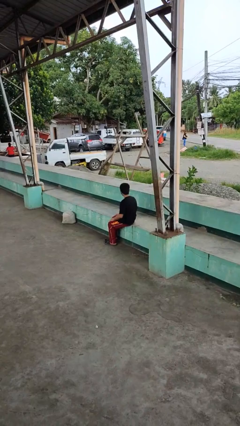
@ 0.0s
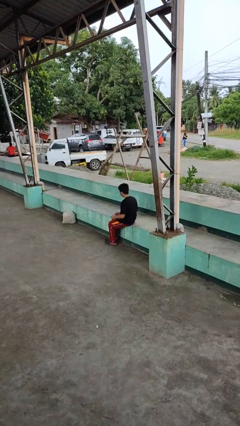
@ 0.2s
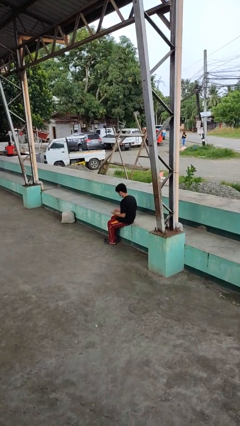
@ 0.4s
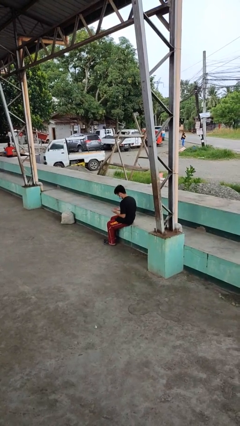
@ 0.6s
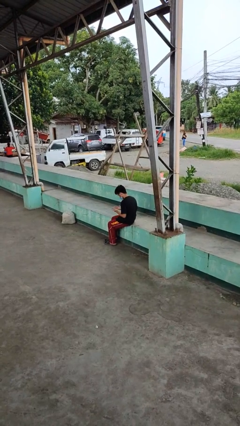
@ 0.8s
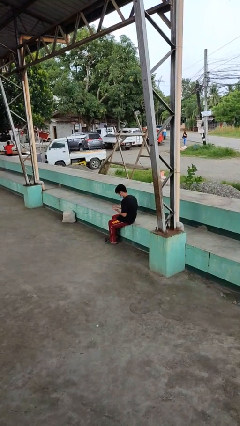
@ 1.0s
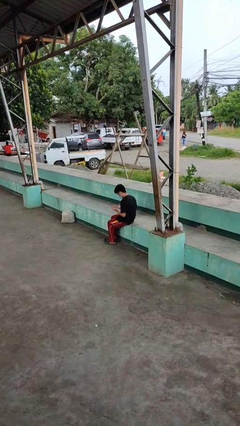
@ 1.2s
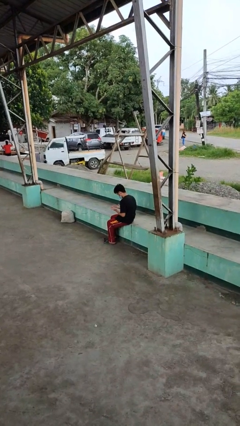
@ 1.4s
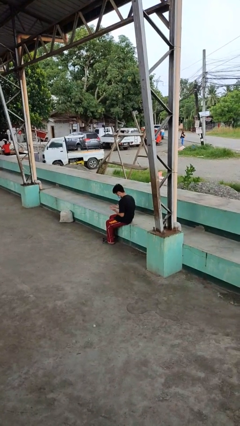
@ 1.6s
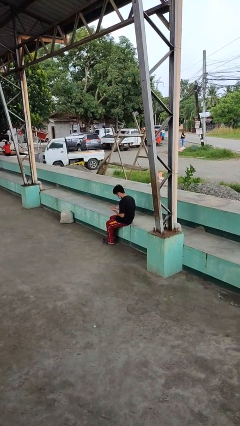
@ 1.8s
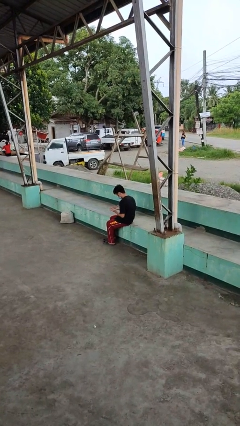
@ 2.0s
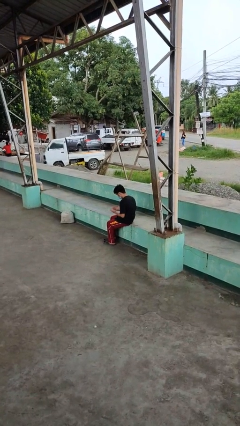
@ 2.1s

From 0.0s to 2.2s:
person looks at hands in lap

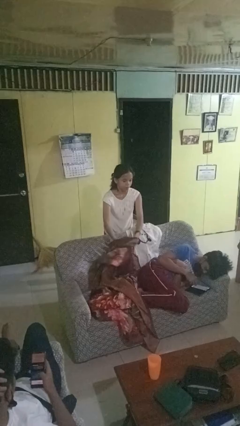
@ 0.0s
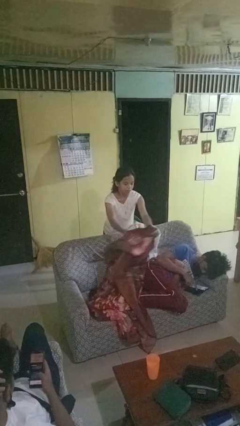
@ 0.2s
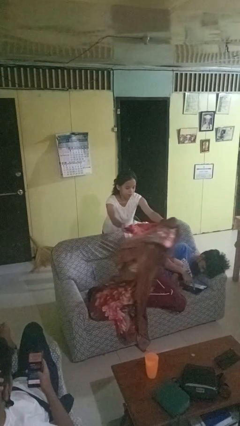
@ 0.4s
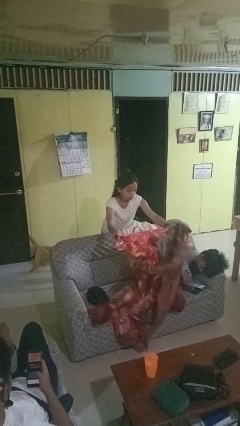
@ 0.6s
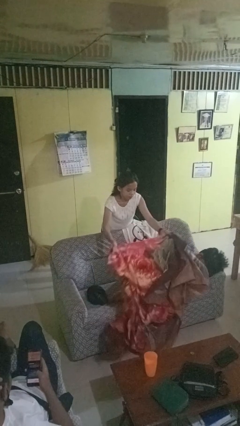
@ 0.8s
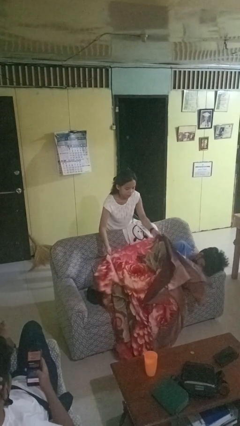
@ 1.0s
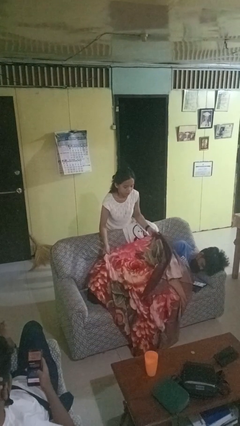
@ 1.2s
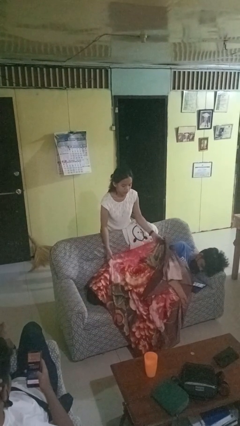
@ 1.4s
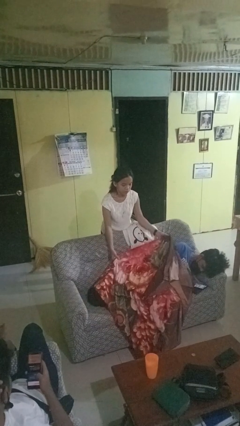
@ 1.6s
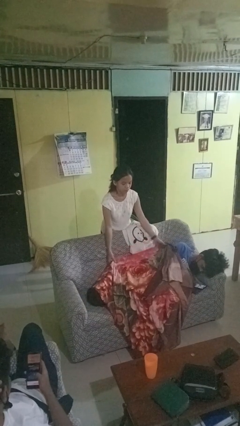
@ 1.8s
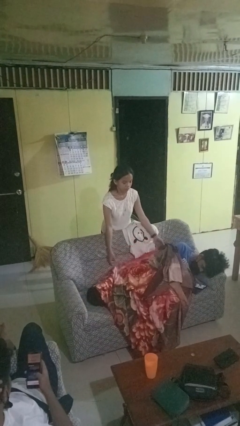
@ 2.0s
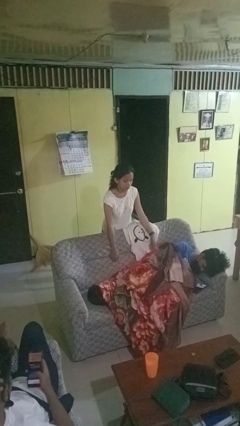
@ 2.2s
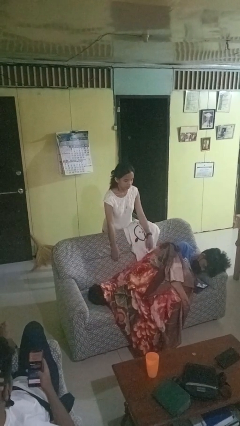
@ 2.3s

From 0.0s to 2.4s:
person covers friend with blanket

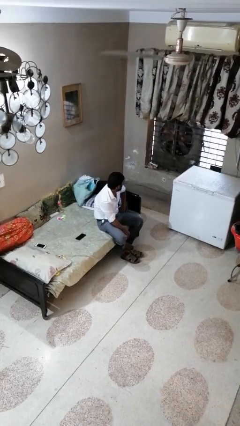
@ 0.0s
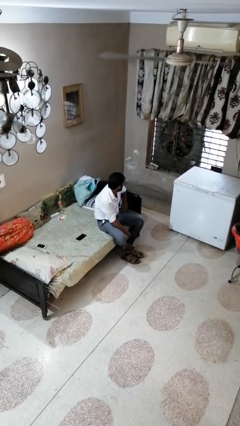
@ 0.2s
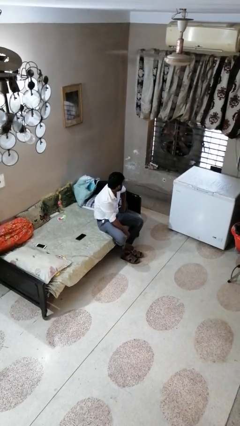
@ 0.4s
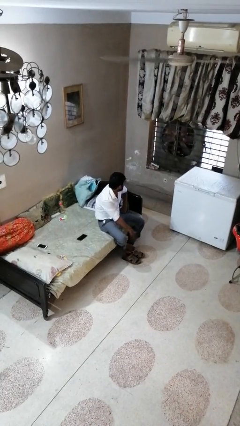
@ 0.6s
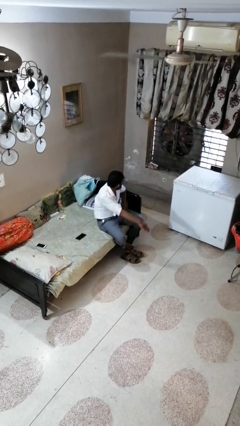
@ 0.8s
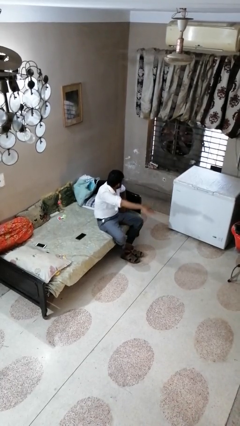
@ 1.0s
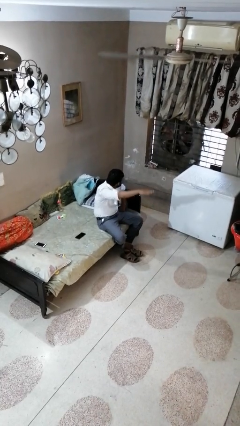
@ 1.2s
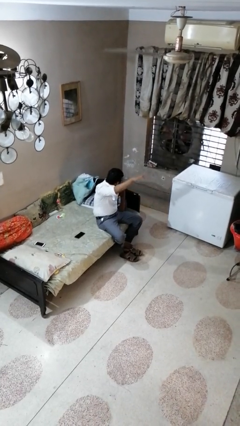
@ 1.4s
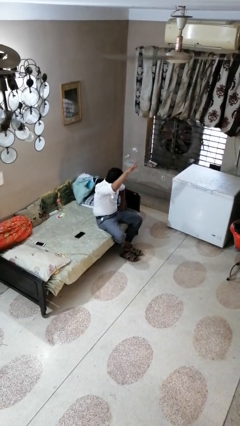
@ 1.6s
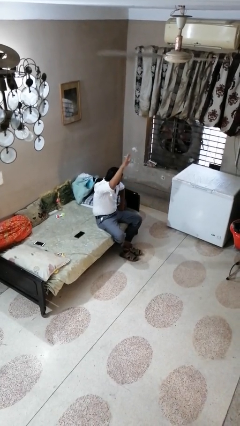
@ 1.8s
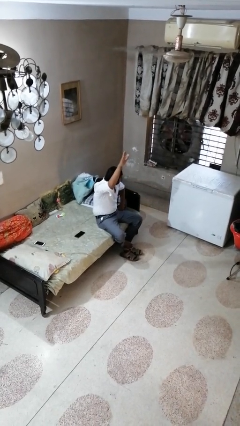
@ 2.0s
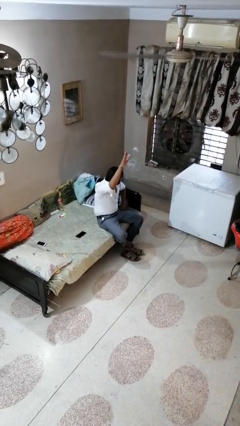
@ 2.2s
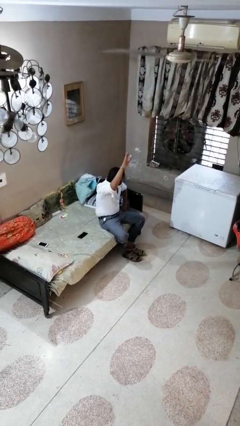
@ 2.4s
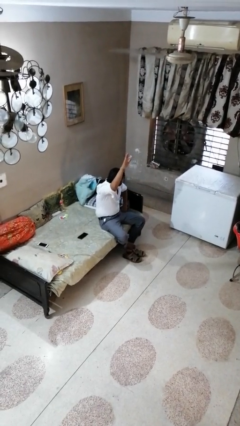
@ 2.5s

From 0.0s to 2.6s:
person gestures swipe up

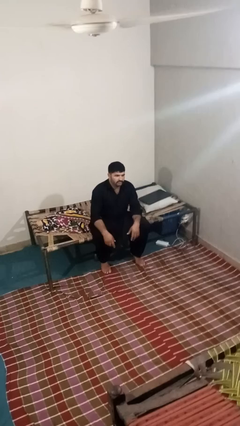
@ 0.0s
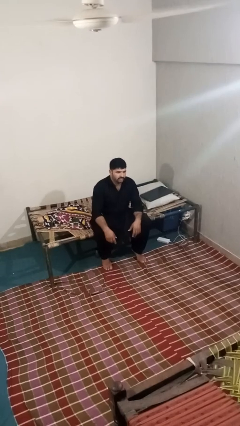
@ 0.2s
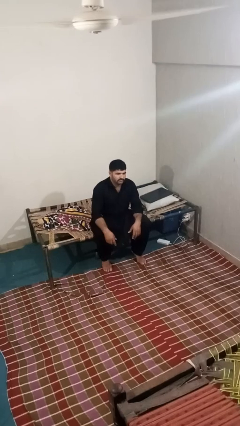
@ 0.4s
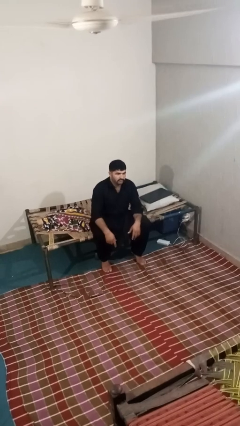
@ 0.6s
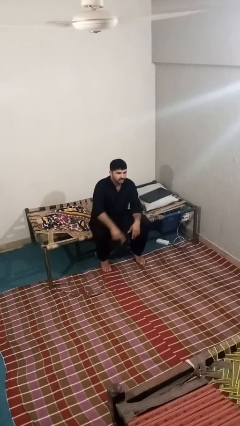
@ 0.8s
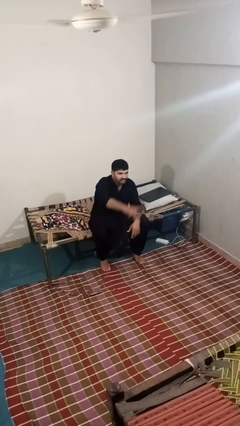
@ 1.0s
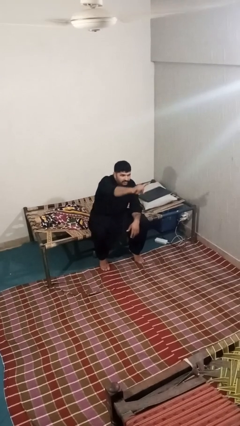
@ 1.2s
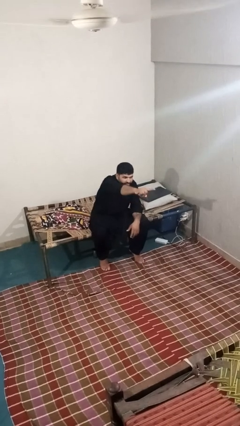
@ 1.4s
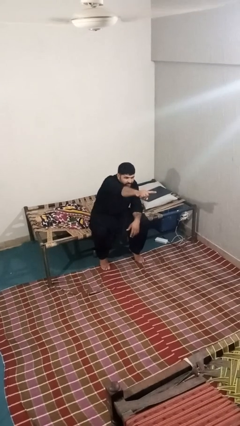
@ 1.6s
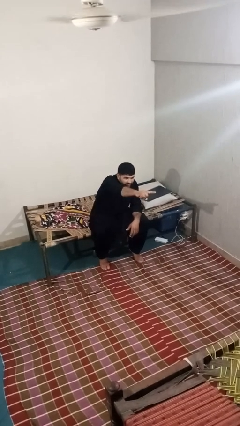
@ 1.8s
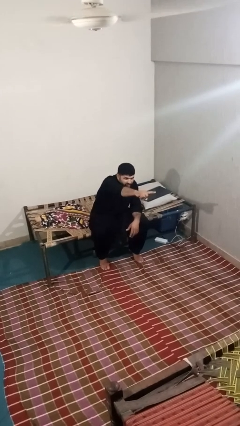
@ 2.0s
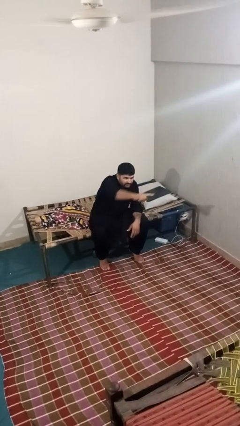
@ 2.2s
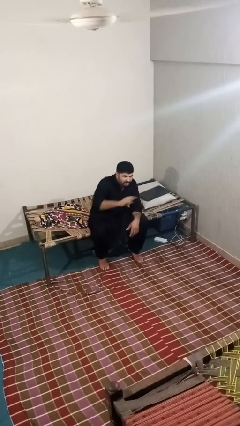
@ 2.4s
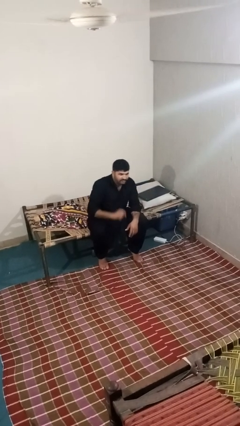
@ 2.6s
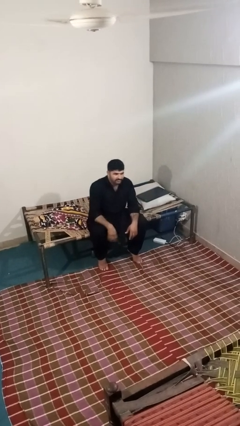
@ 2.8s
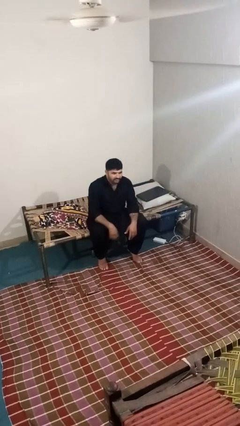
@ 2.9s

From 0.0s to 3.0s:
person points at person

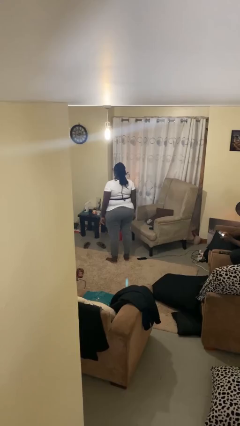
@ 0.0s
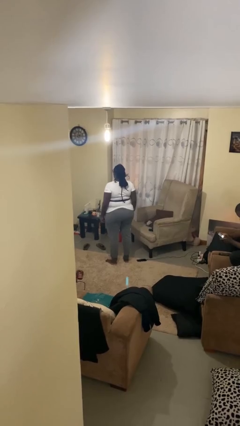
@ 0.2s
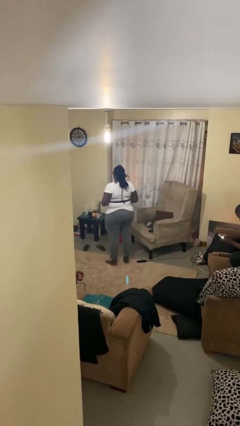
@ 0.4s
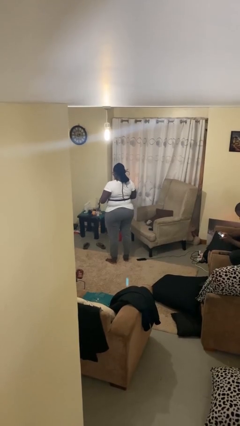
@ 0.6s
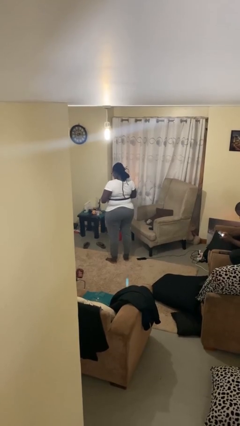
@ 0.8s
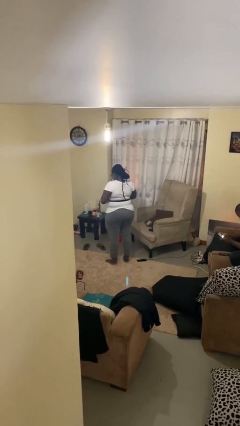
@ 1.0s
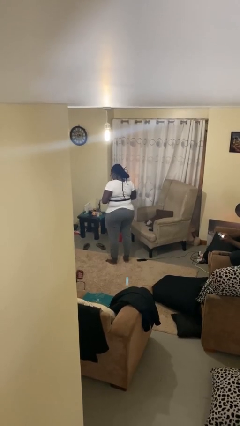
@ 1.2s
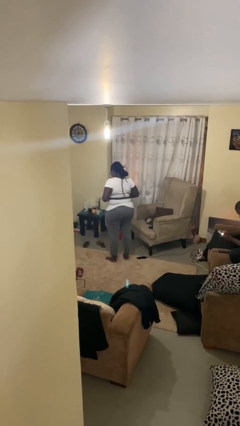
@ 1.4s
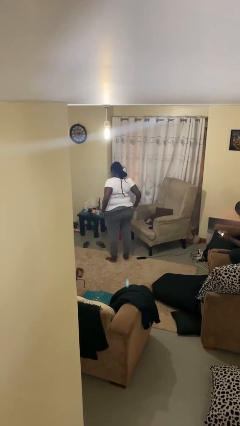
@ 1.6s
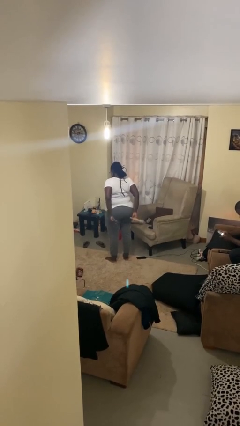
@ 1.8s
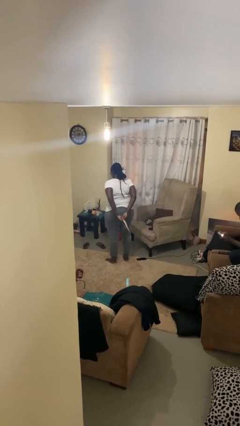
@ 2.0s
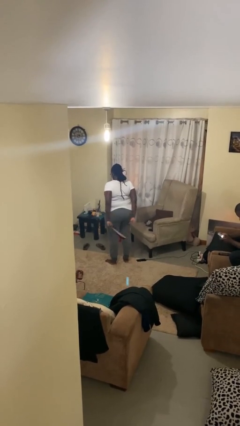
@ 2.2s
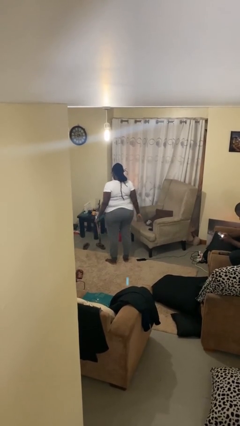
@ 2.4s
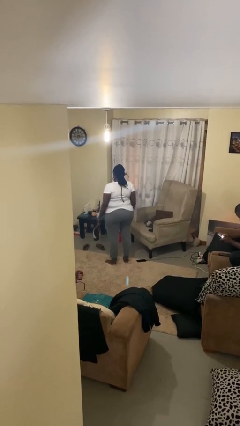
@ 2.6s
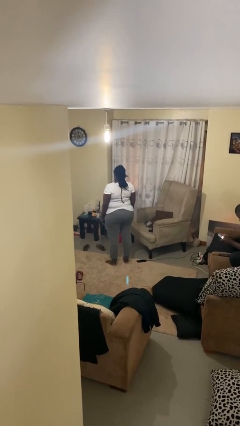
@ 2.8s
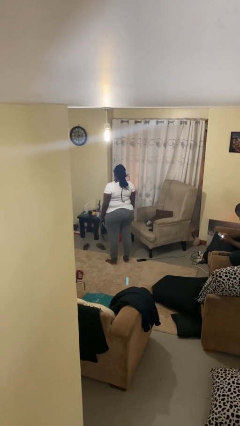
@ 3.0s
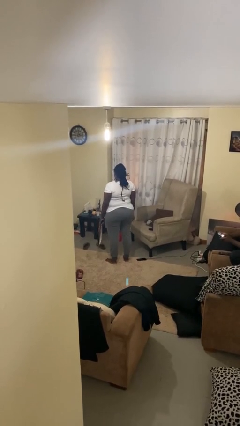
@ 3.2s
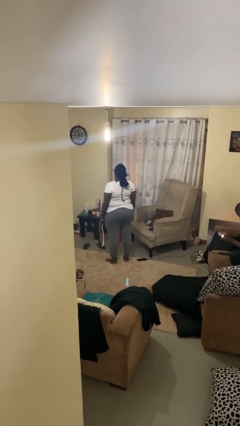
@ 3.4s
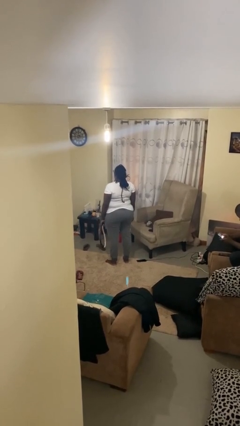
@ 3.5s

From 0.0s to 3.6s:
person takes off belt

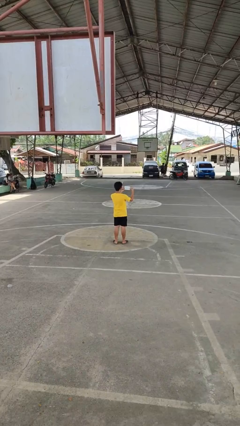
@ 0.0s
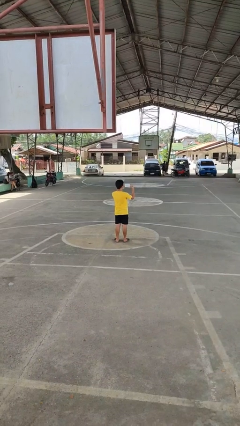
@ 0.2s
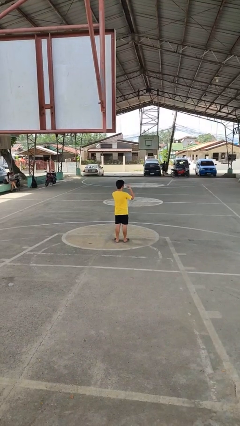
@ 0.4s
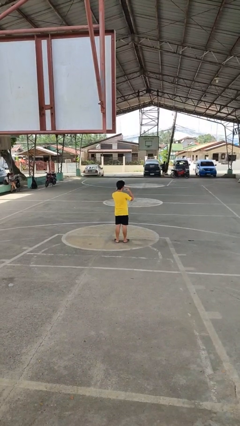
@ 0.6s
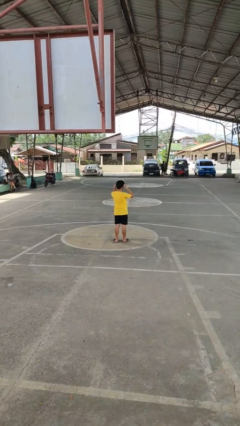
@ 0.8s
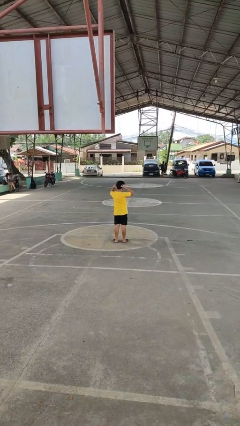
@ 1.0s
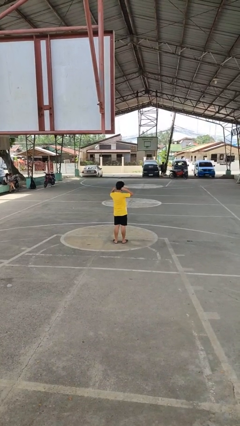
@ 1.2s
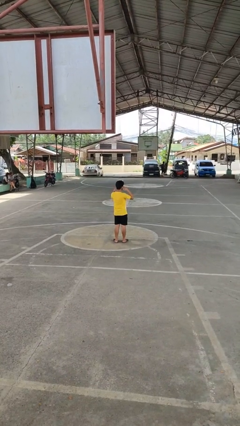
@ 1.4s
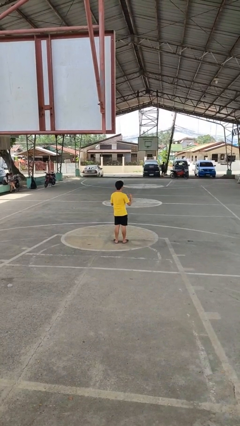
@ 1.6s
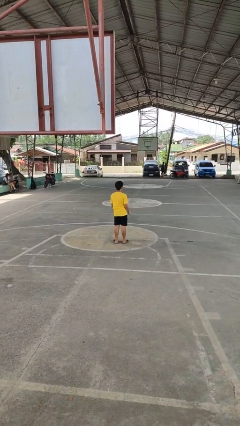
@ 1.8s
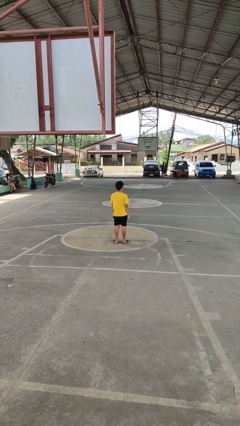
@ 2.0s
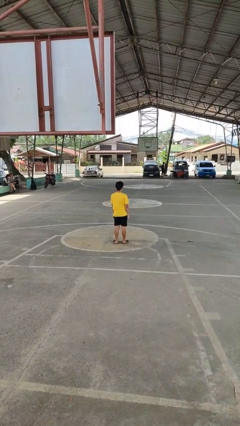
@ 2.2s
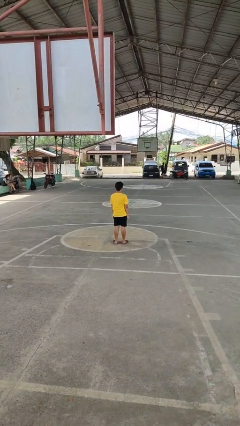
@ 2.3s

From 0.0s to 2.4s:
person puts on facemask

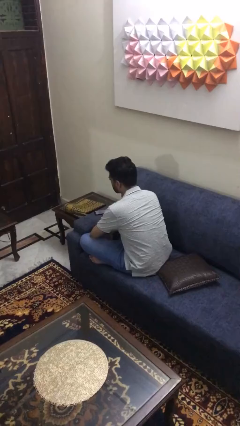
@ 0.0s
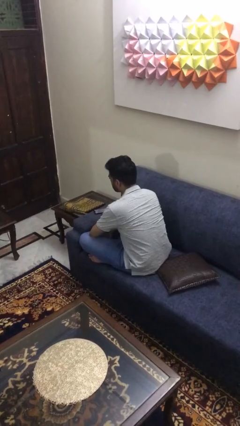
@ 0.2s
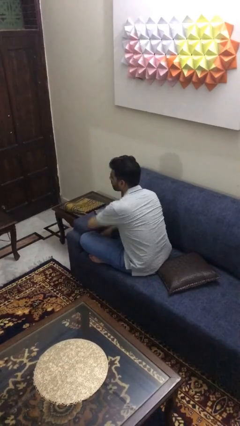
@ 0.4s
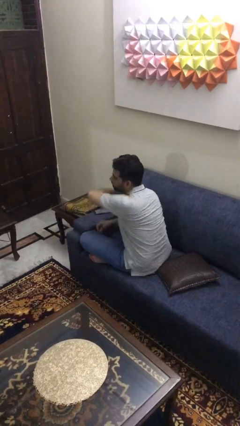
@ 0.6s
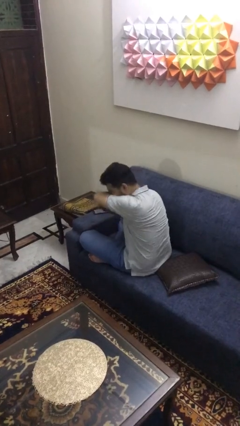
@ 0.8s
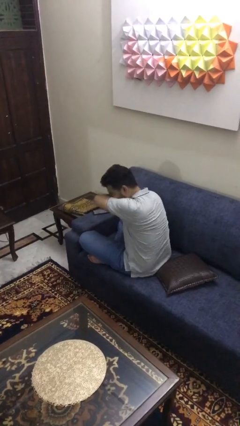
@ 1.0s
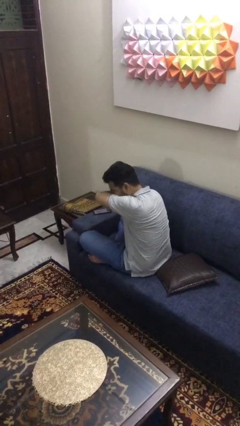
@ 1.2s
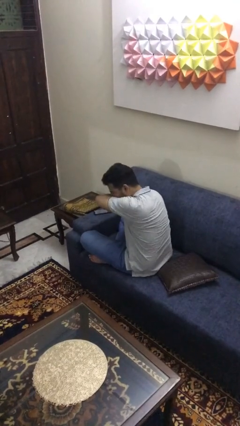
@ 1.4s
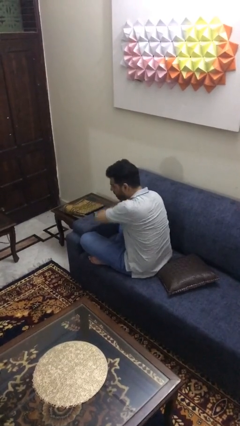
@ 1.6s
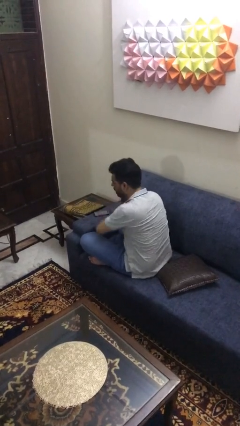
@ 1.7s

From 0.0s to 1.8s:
person sneezes into arm
